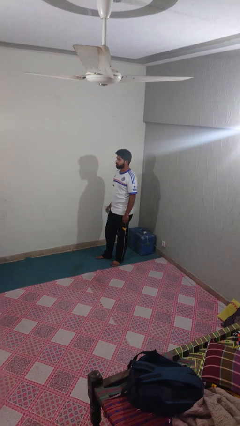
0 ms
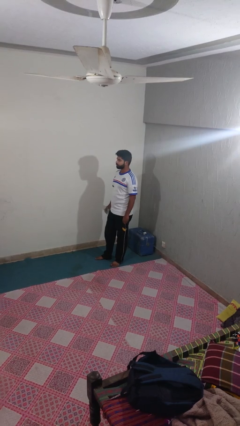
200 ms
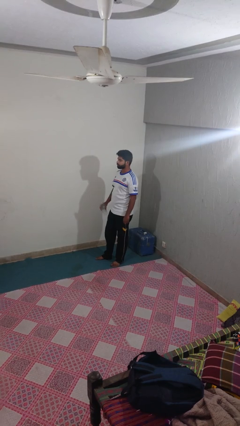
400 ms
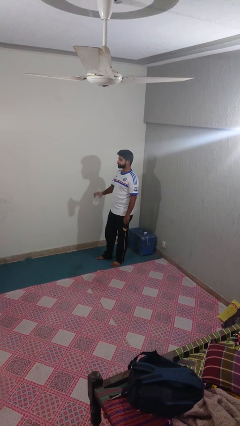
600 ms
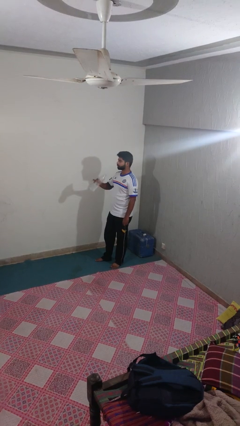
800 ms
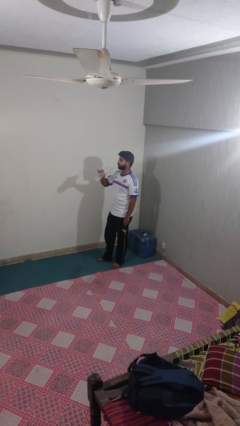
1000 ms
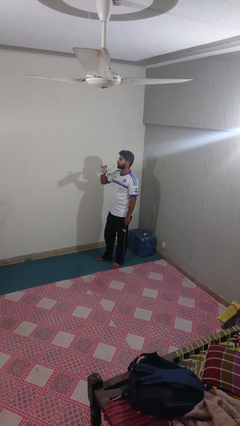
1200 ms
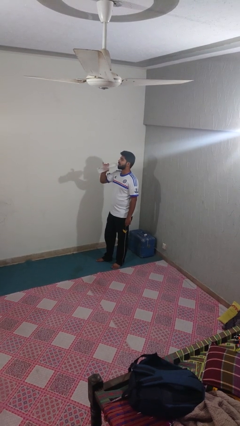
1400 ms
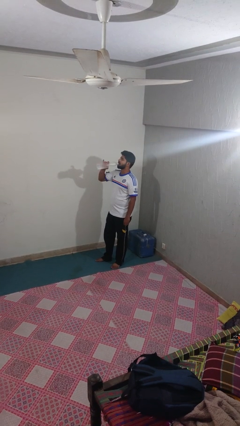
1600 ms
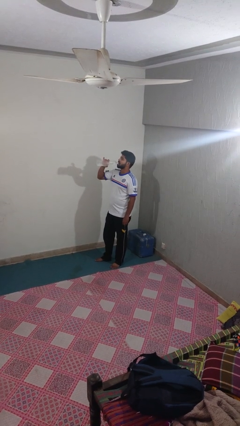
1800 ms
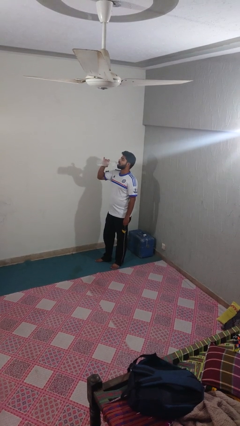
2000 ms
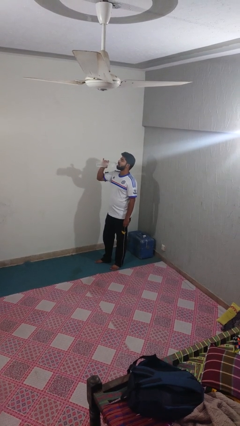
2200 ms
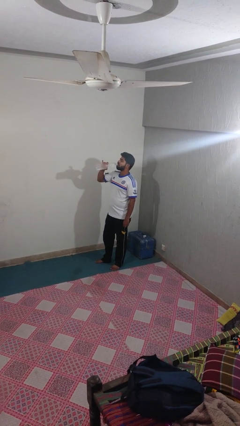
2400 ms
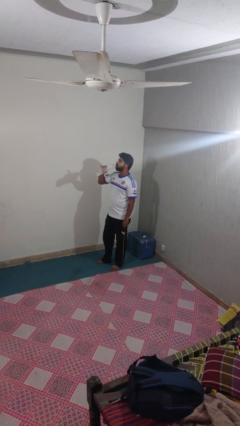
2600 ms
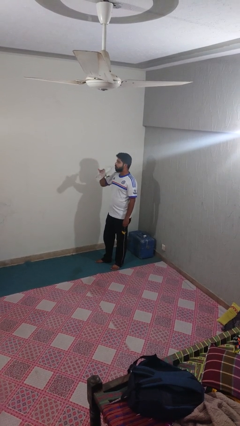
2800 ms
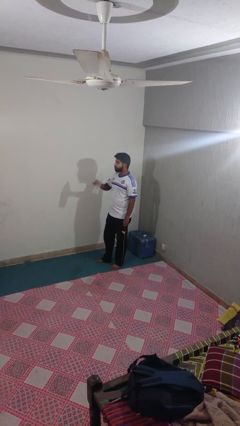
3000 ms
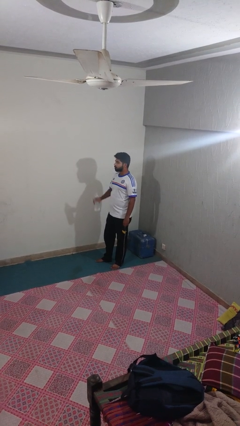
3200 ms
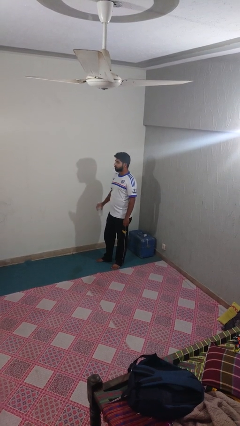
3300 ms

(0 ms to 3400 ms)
person drinks from bottle

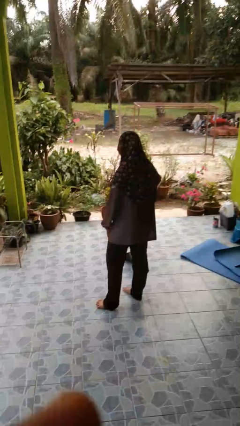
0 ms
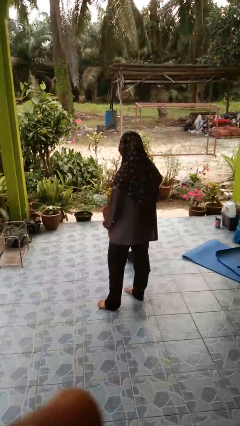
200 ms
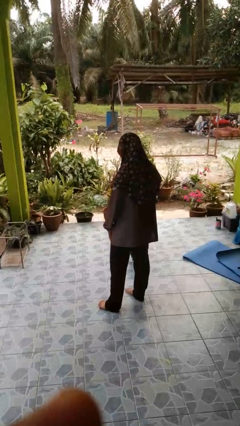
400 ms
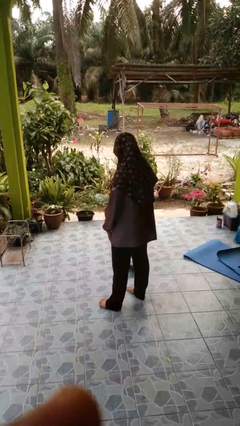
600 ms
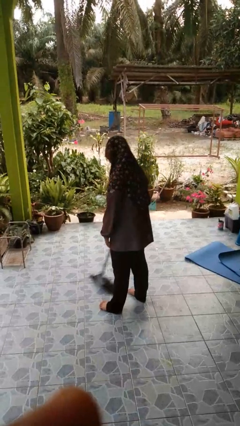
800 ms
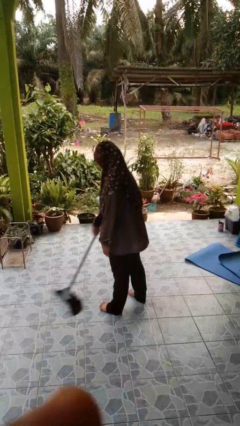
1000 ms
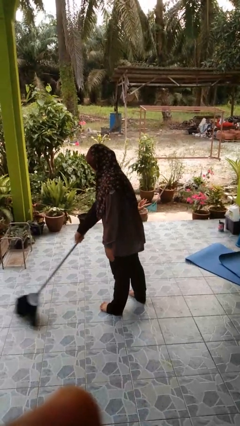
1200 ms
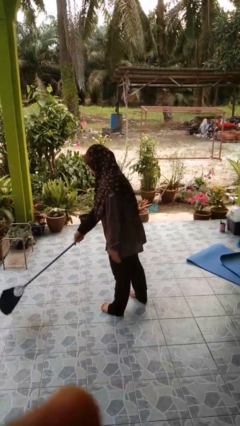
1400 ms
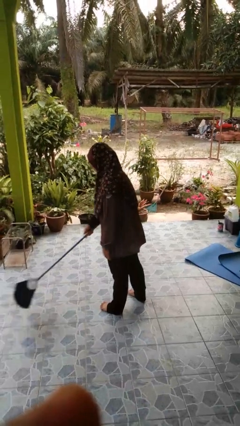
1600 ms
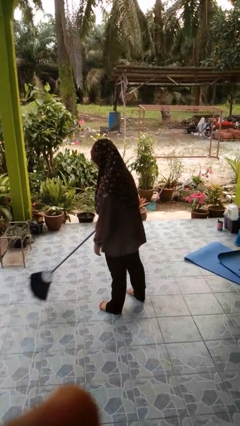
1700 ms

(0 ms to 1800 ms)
person sweeps floor

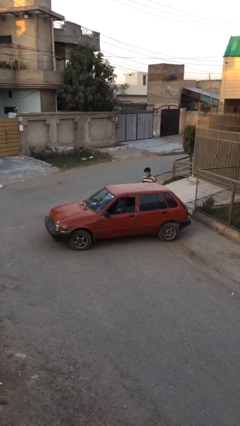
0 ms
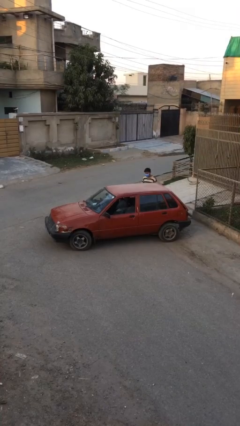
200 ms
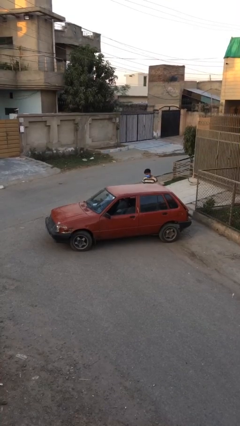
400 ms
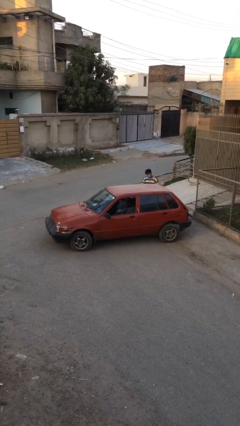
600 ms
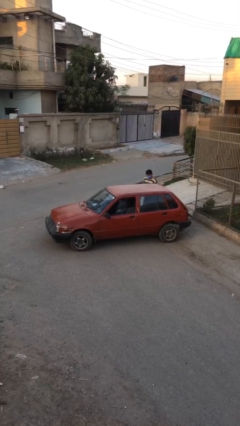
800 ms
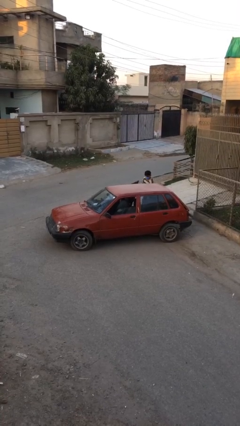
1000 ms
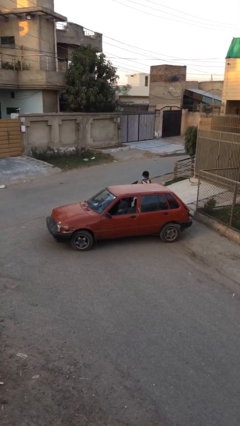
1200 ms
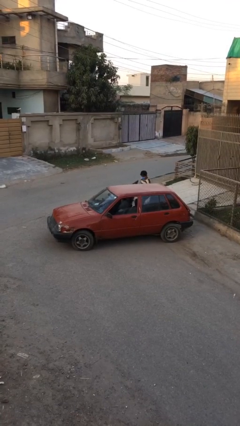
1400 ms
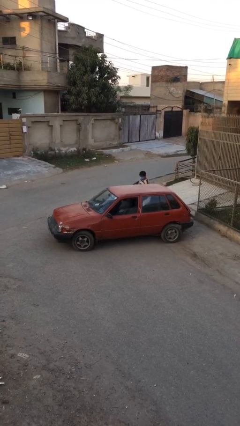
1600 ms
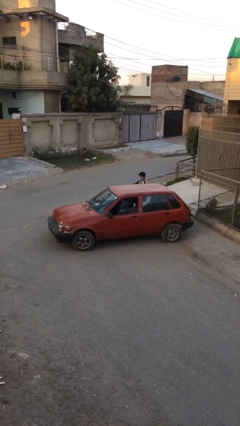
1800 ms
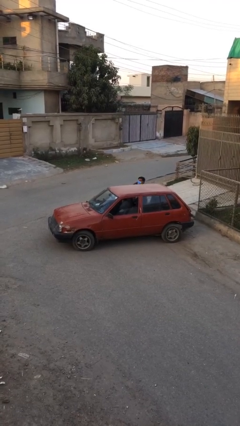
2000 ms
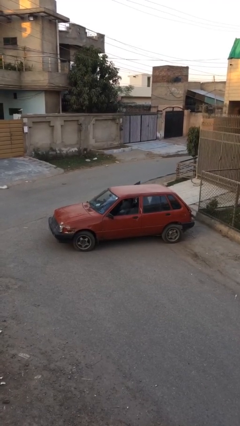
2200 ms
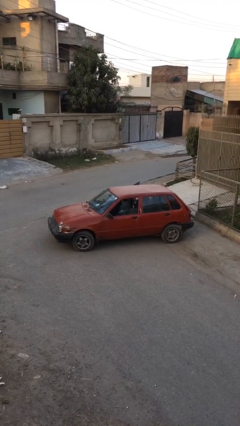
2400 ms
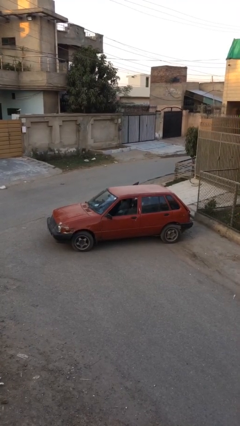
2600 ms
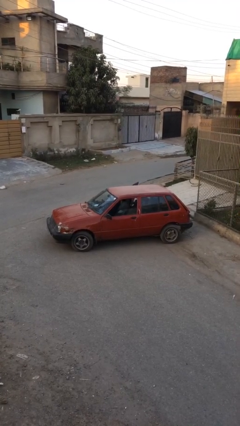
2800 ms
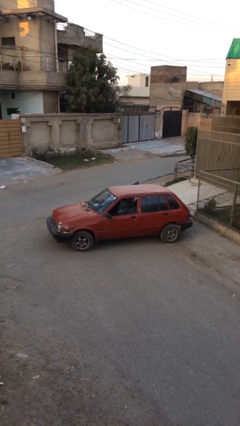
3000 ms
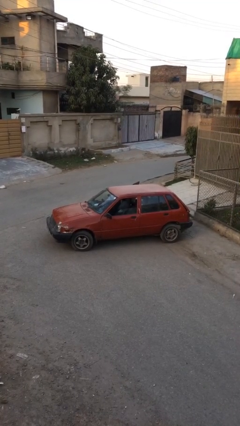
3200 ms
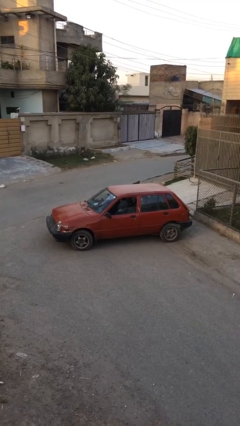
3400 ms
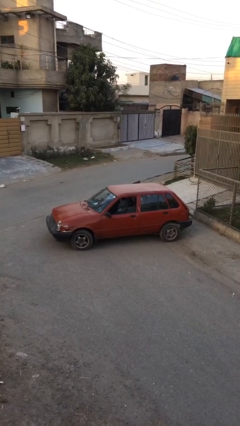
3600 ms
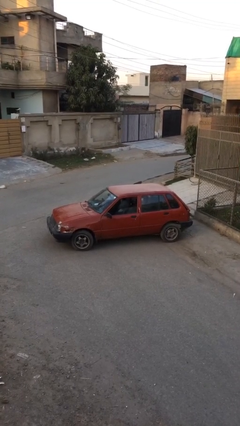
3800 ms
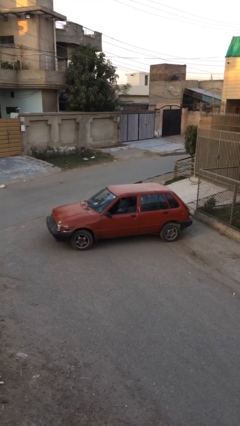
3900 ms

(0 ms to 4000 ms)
car picks up person

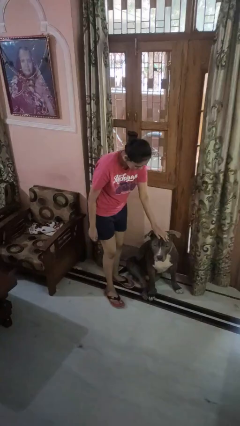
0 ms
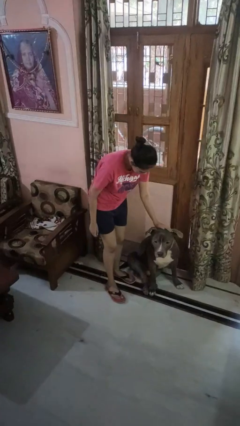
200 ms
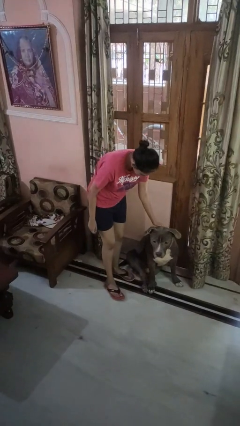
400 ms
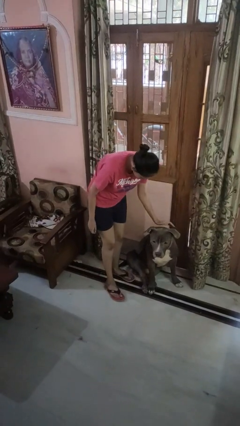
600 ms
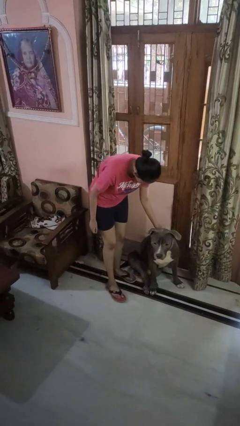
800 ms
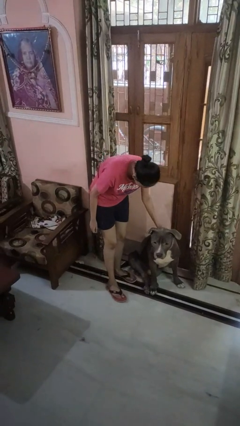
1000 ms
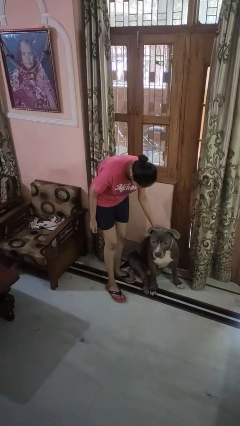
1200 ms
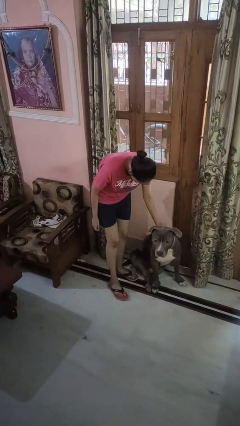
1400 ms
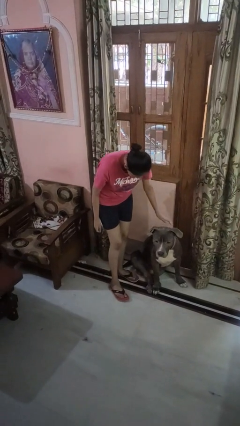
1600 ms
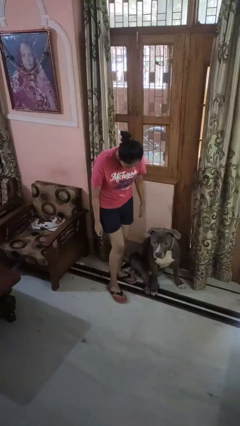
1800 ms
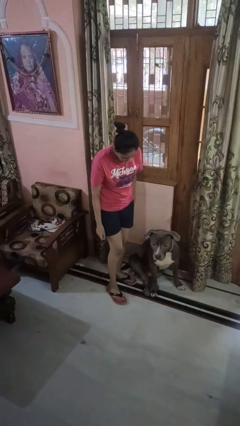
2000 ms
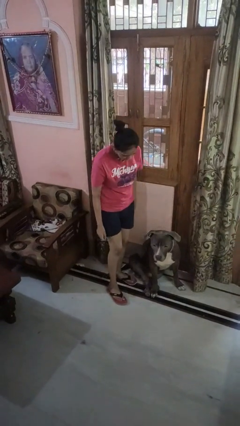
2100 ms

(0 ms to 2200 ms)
person pets dog

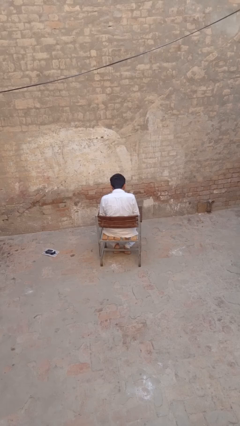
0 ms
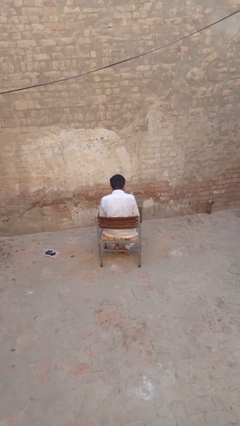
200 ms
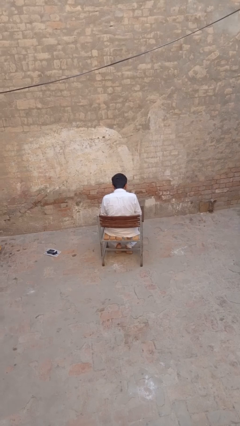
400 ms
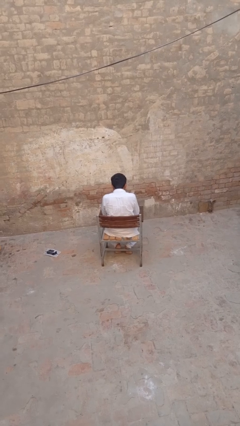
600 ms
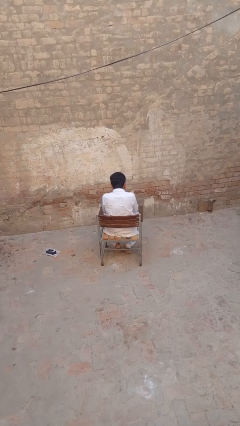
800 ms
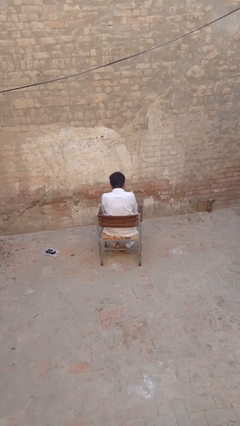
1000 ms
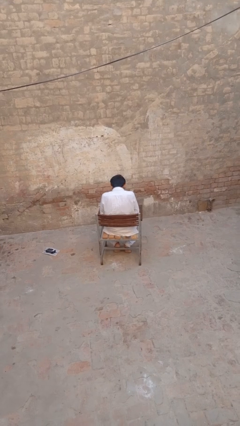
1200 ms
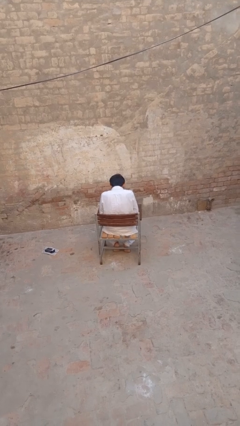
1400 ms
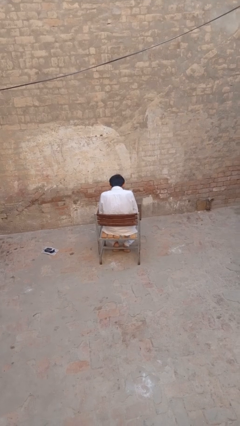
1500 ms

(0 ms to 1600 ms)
person sneezes into hand

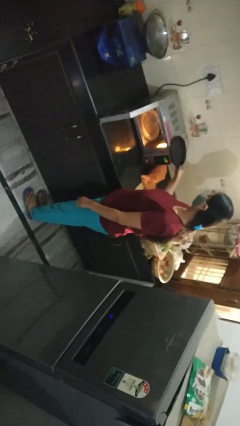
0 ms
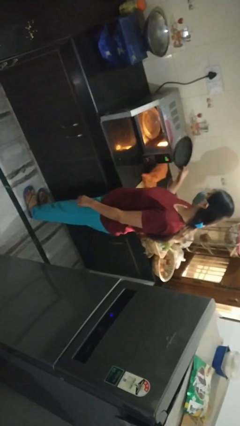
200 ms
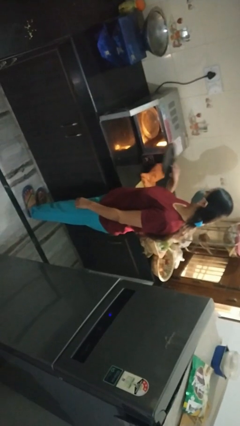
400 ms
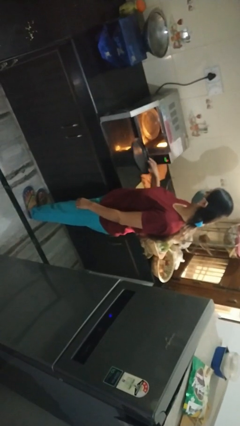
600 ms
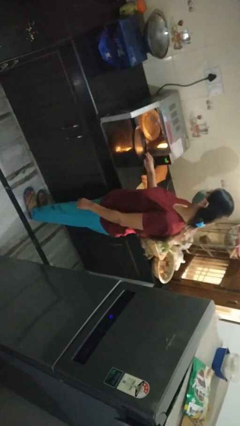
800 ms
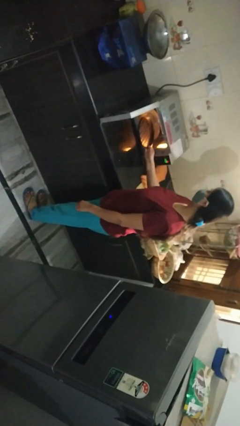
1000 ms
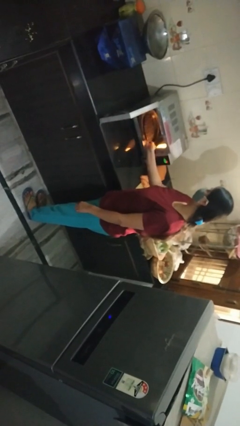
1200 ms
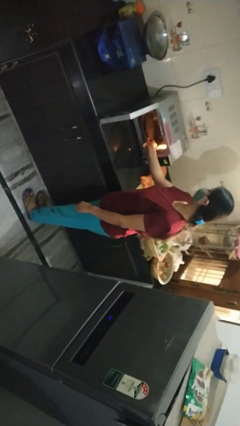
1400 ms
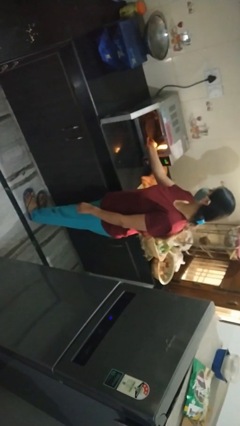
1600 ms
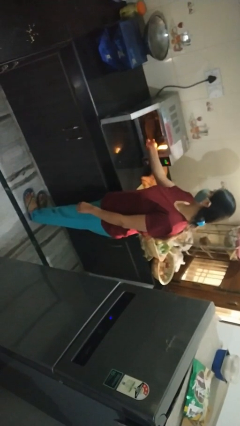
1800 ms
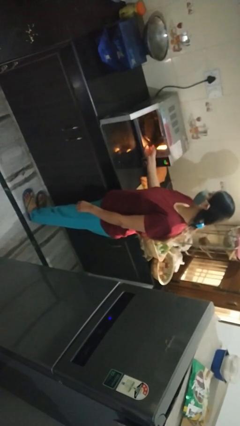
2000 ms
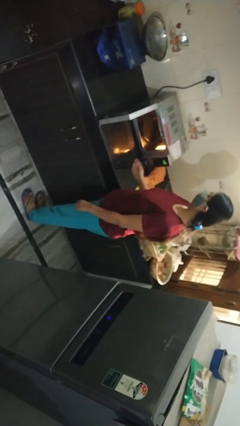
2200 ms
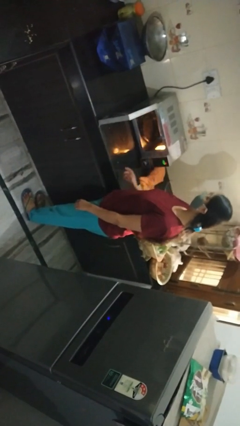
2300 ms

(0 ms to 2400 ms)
person puts object into microwave

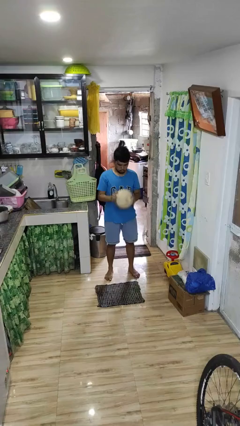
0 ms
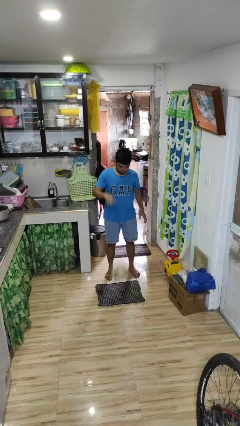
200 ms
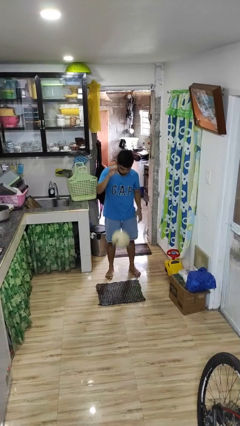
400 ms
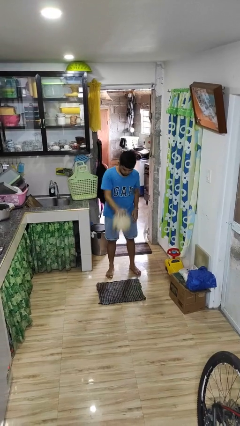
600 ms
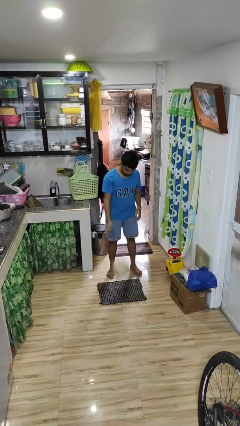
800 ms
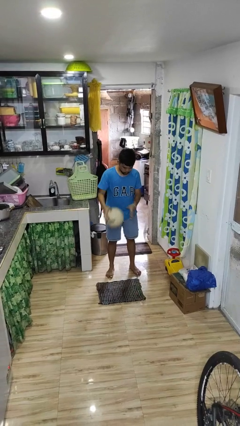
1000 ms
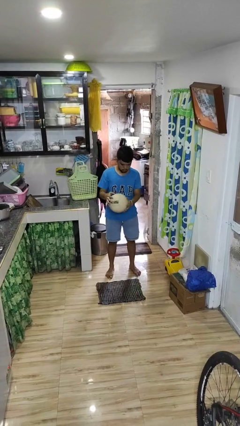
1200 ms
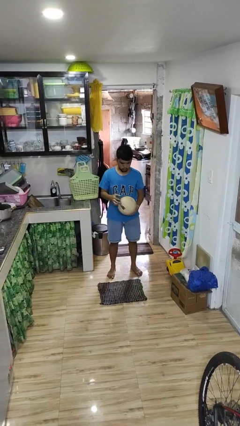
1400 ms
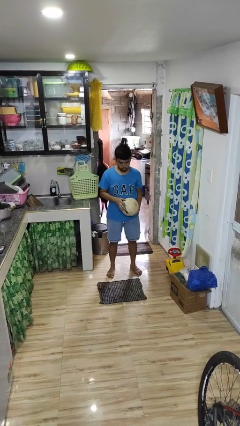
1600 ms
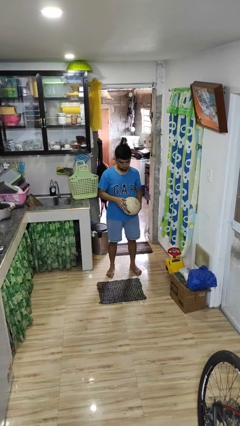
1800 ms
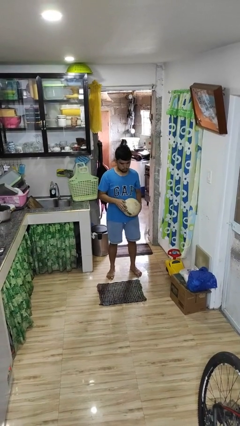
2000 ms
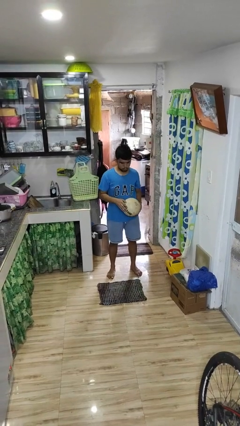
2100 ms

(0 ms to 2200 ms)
person bounces ball on floor
